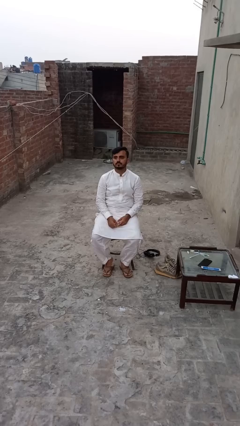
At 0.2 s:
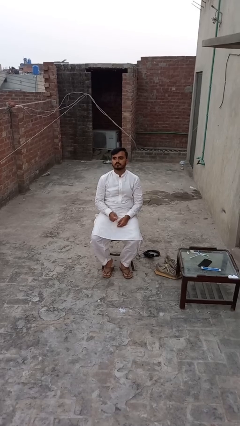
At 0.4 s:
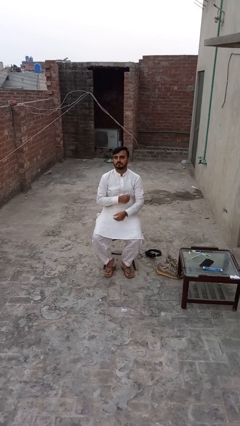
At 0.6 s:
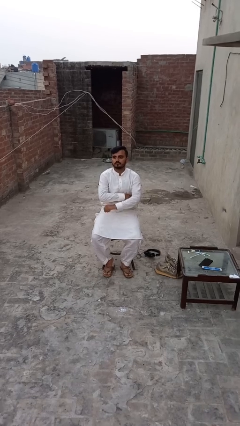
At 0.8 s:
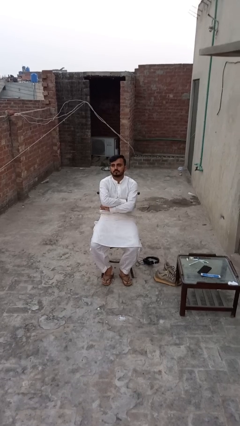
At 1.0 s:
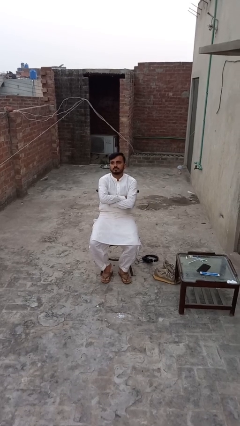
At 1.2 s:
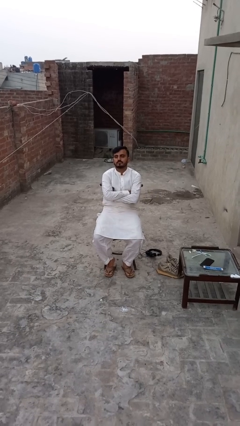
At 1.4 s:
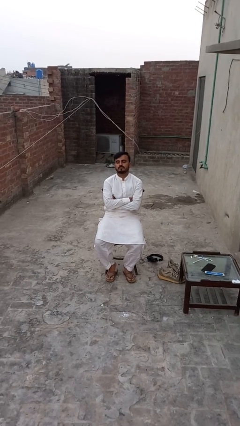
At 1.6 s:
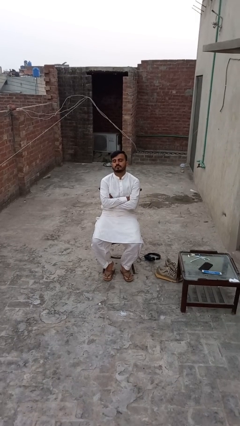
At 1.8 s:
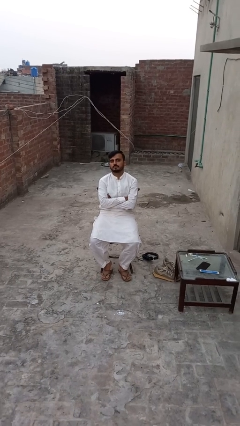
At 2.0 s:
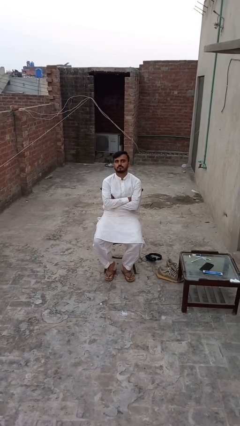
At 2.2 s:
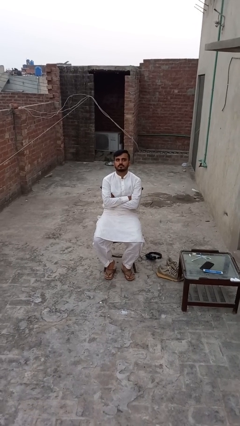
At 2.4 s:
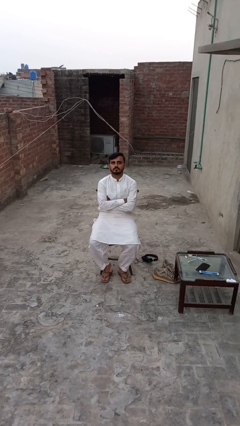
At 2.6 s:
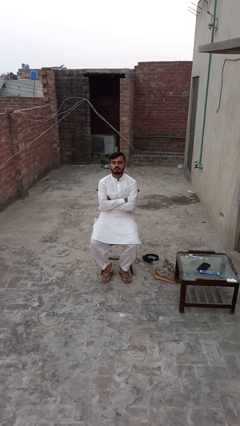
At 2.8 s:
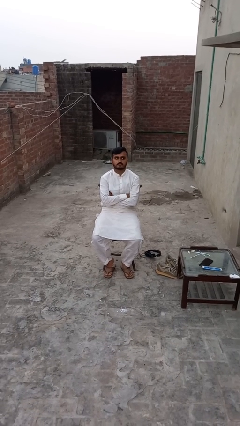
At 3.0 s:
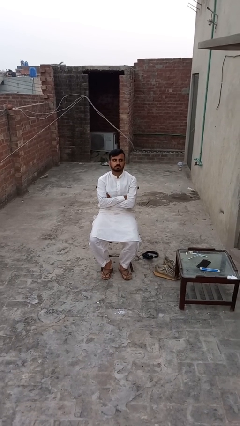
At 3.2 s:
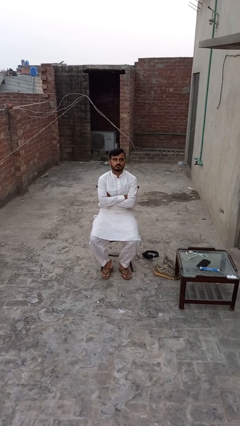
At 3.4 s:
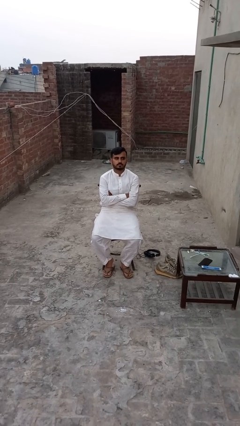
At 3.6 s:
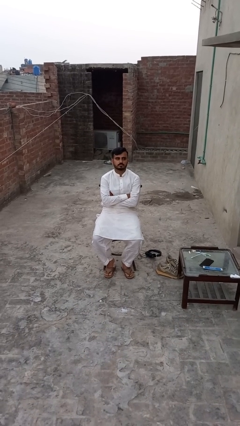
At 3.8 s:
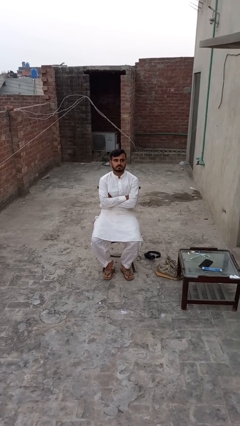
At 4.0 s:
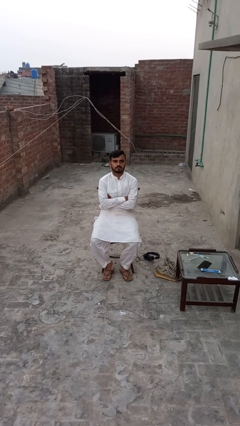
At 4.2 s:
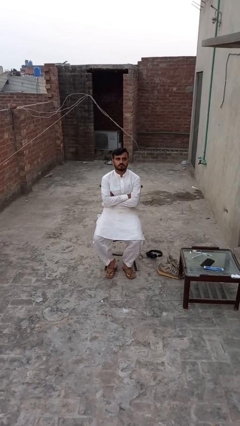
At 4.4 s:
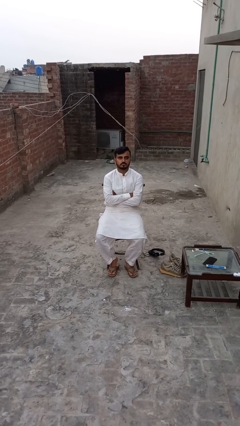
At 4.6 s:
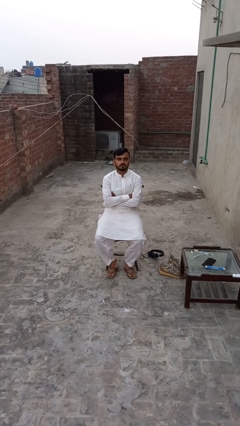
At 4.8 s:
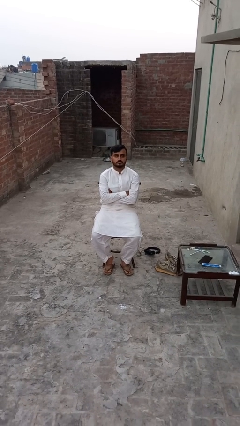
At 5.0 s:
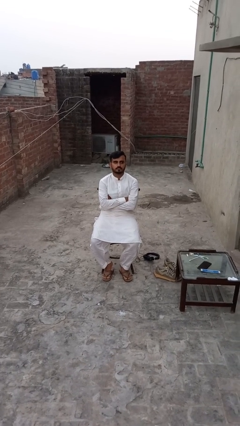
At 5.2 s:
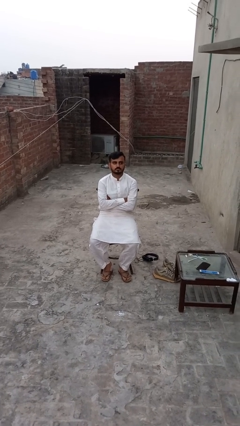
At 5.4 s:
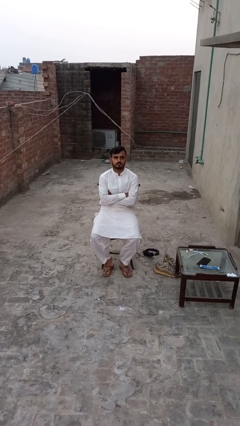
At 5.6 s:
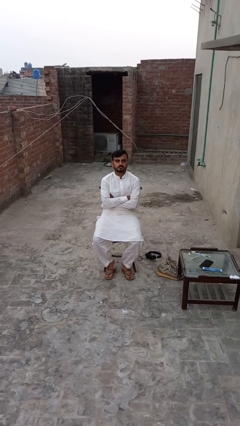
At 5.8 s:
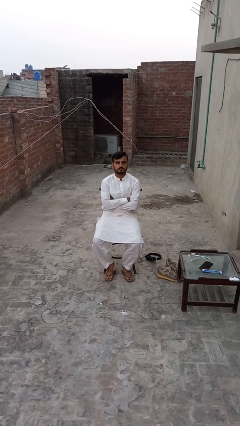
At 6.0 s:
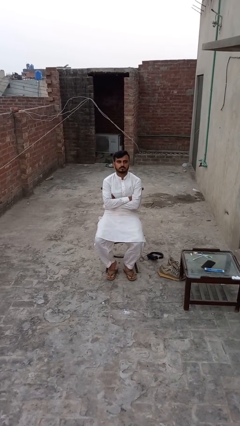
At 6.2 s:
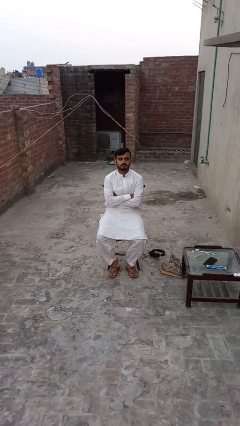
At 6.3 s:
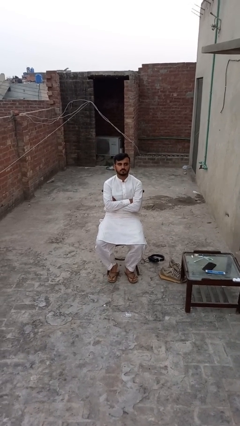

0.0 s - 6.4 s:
person crosses arms

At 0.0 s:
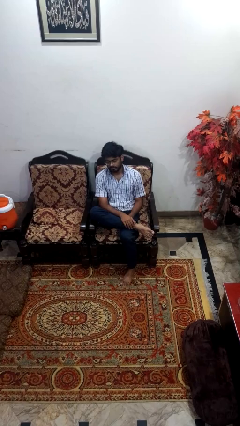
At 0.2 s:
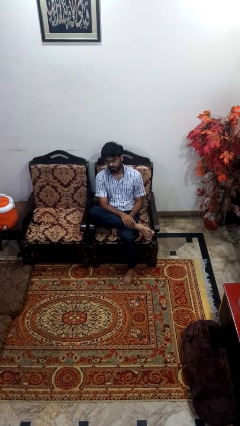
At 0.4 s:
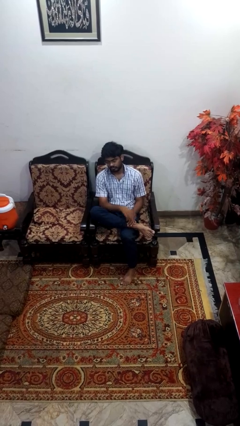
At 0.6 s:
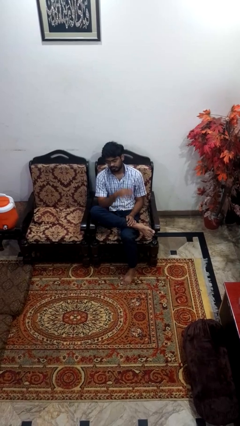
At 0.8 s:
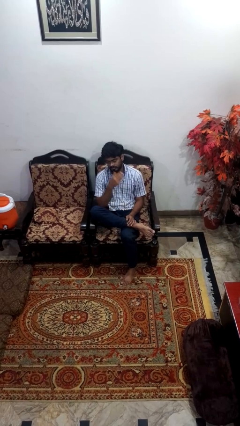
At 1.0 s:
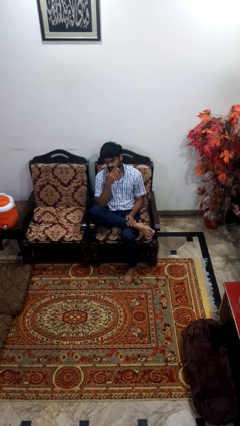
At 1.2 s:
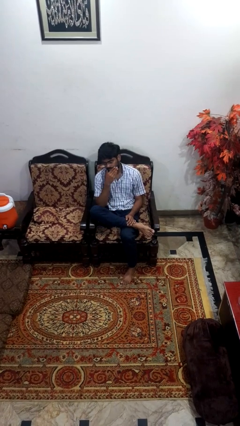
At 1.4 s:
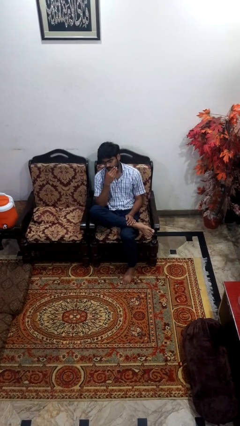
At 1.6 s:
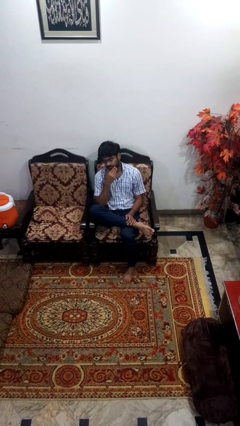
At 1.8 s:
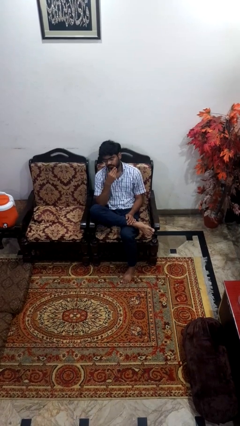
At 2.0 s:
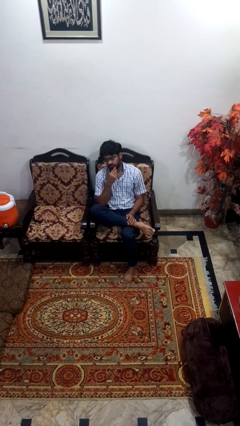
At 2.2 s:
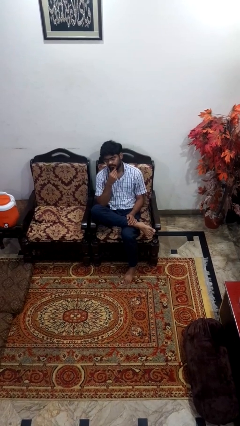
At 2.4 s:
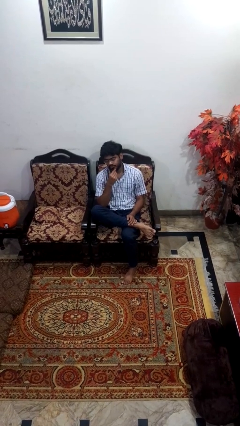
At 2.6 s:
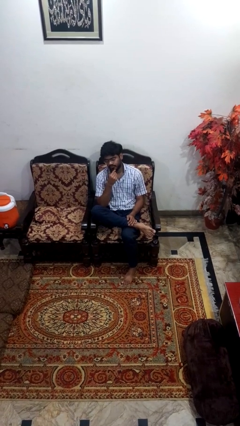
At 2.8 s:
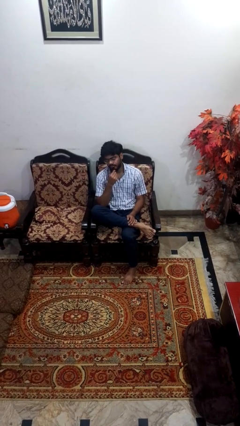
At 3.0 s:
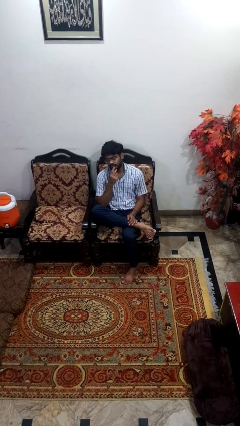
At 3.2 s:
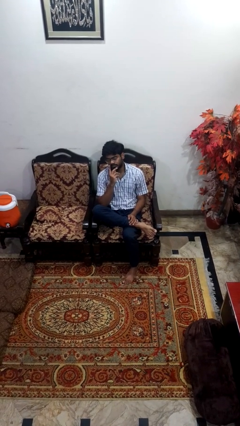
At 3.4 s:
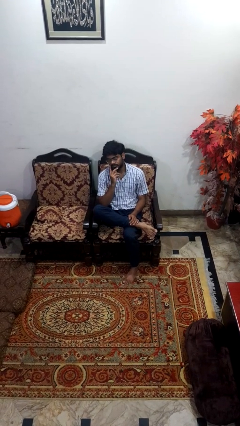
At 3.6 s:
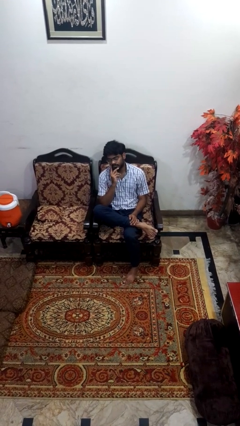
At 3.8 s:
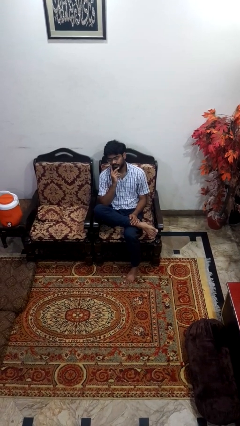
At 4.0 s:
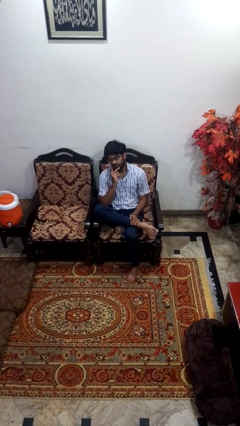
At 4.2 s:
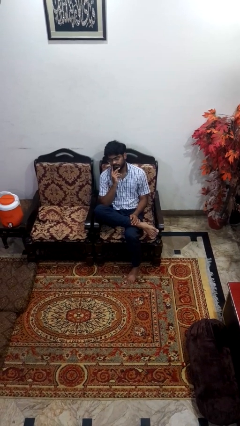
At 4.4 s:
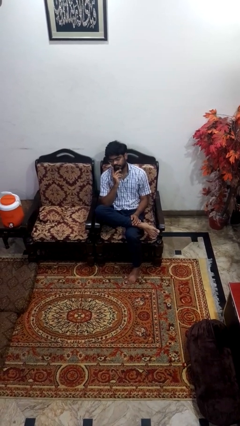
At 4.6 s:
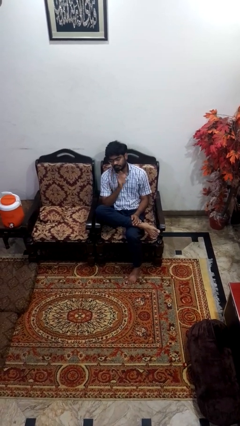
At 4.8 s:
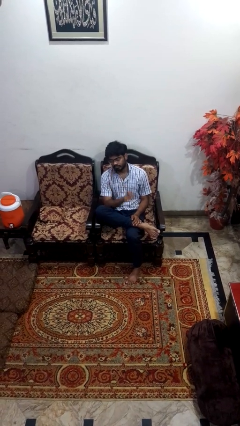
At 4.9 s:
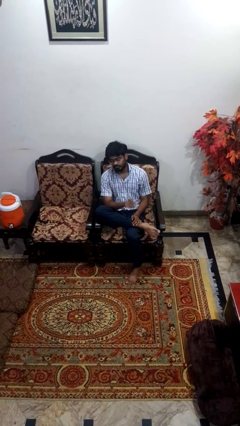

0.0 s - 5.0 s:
person strokes chin

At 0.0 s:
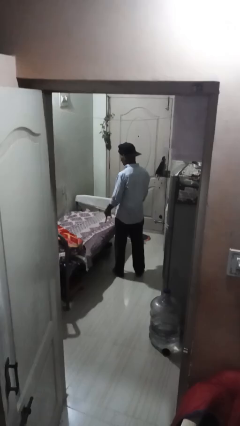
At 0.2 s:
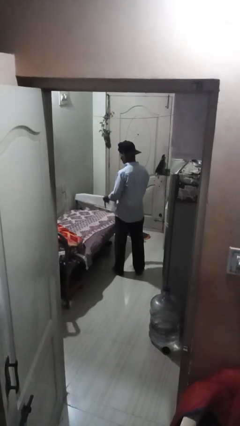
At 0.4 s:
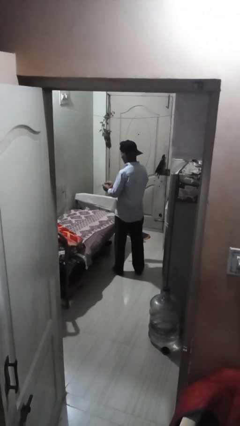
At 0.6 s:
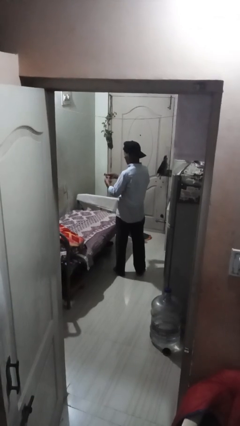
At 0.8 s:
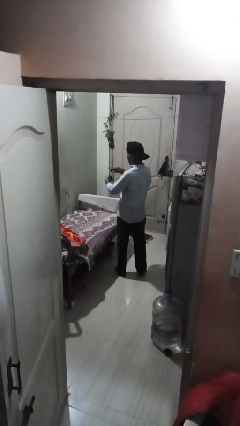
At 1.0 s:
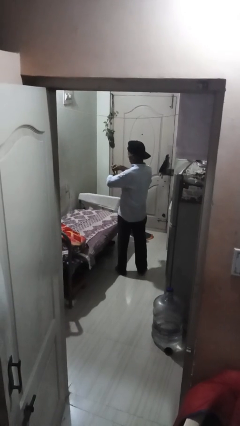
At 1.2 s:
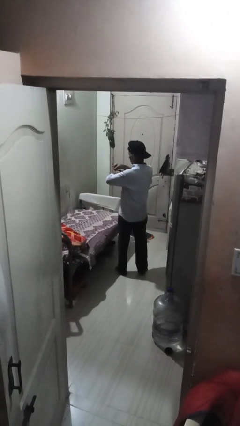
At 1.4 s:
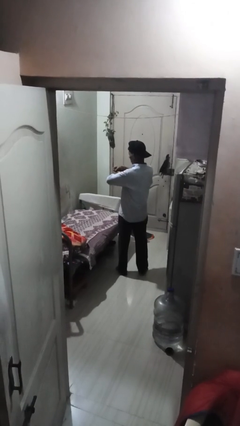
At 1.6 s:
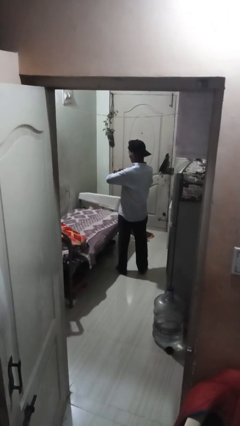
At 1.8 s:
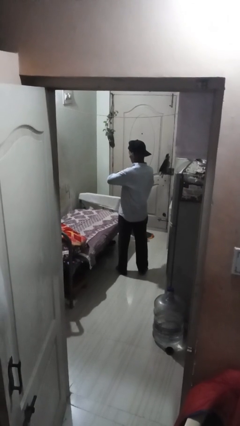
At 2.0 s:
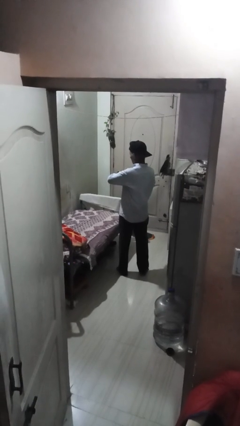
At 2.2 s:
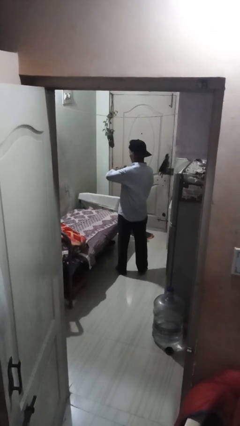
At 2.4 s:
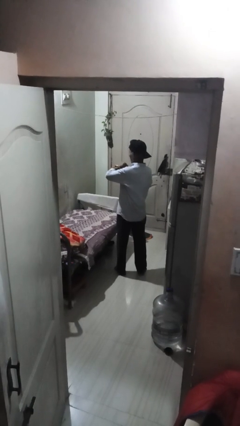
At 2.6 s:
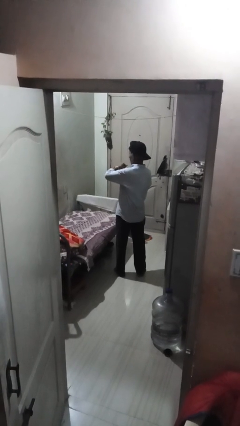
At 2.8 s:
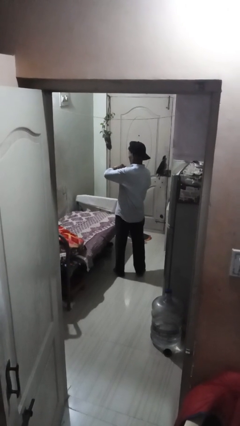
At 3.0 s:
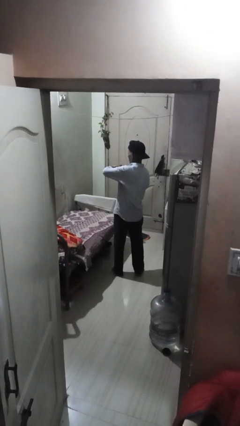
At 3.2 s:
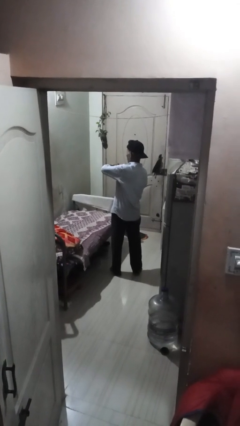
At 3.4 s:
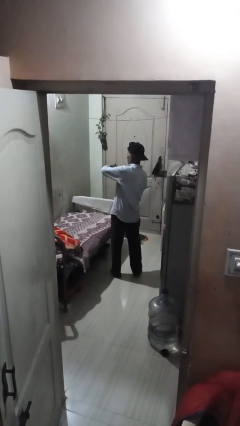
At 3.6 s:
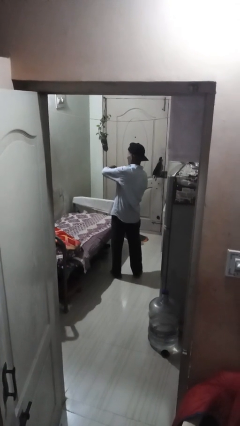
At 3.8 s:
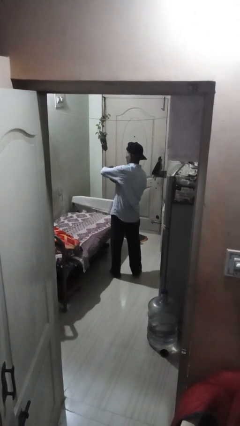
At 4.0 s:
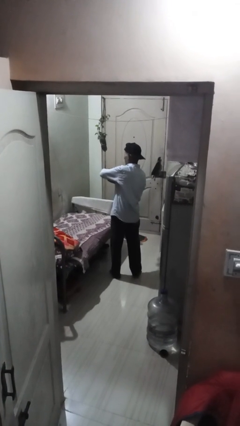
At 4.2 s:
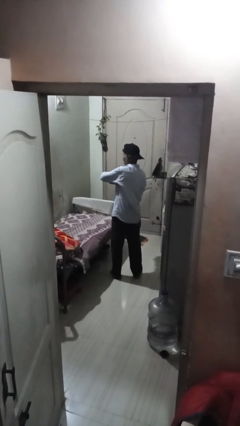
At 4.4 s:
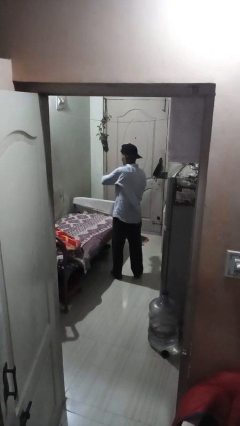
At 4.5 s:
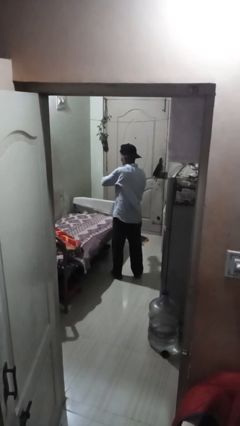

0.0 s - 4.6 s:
person puts on wristwatch

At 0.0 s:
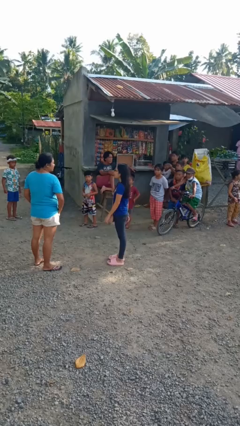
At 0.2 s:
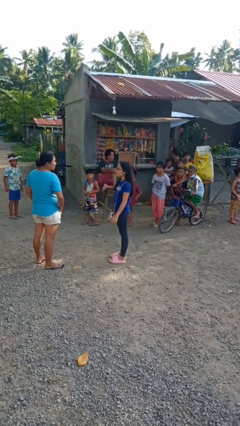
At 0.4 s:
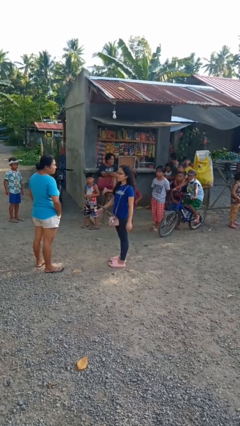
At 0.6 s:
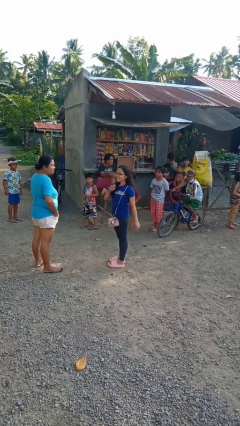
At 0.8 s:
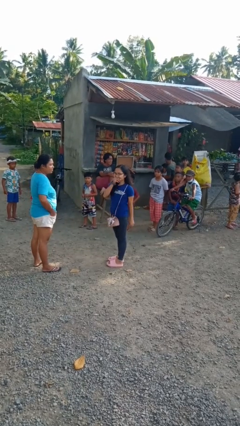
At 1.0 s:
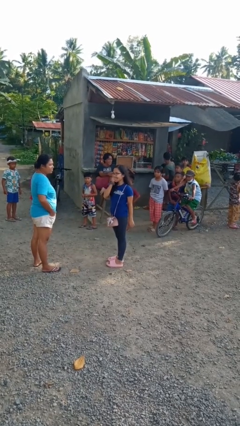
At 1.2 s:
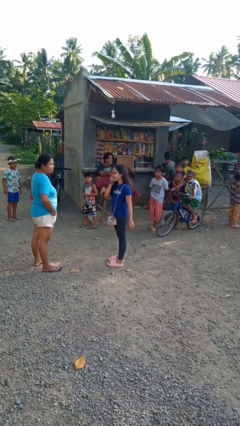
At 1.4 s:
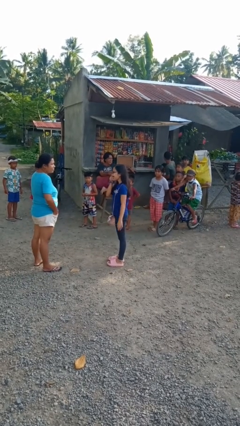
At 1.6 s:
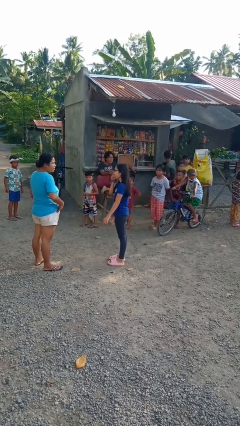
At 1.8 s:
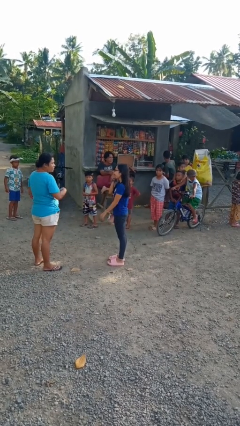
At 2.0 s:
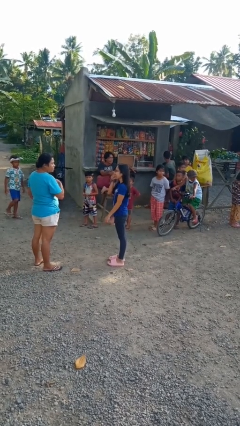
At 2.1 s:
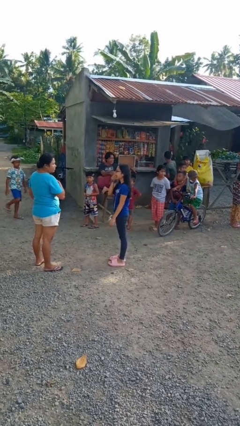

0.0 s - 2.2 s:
person laughs with person
